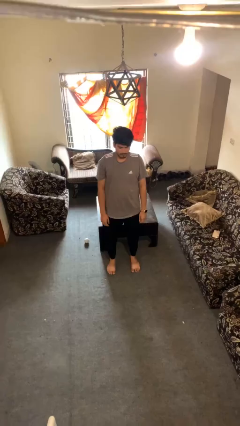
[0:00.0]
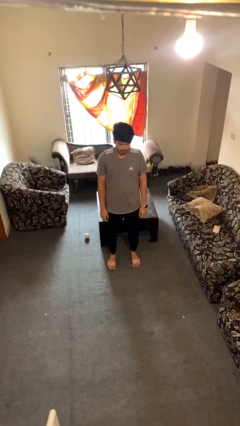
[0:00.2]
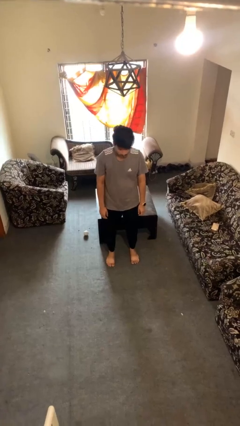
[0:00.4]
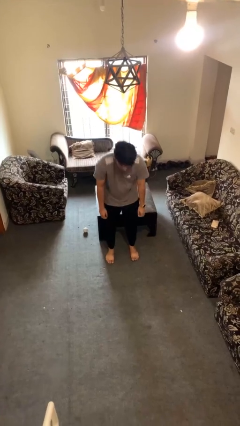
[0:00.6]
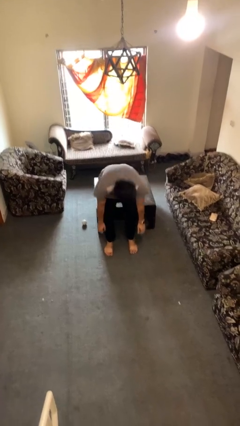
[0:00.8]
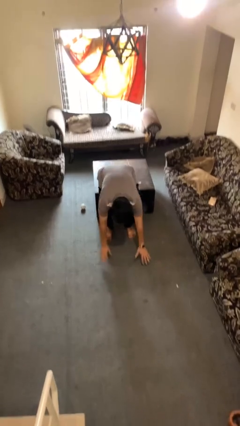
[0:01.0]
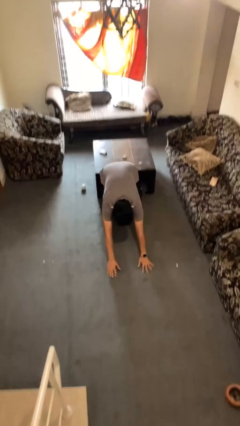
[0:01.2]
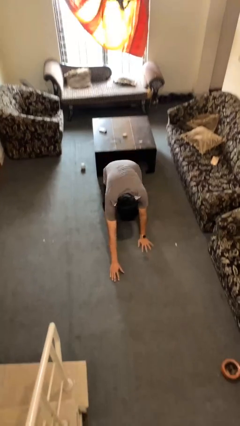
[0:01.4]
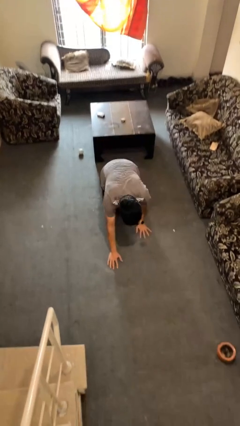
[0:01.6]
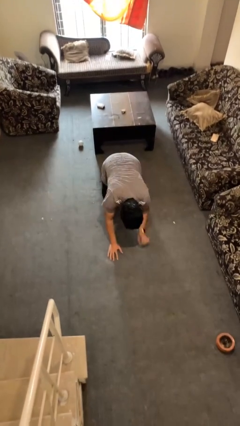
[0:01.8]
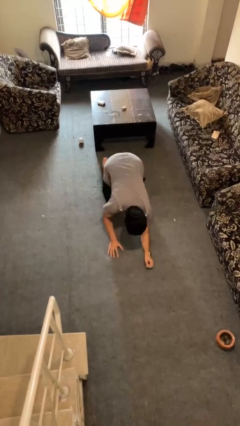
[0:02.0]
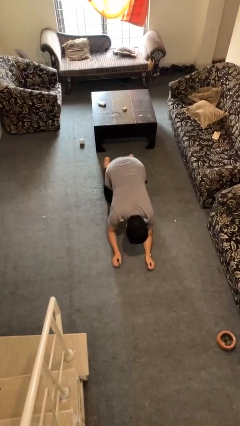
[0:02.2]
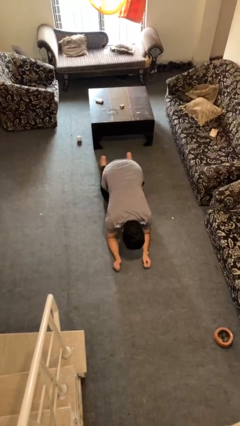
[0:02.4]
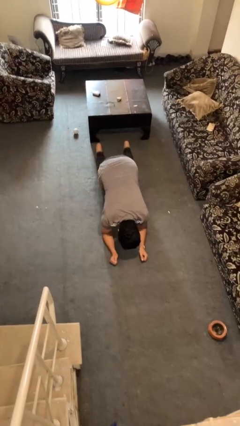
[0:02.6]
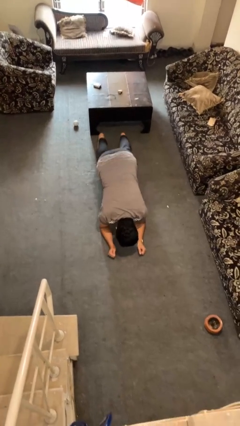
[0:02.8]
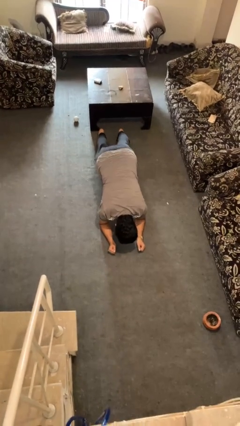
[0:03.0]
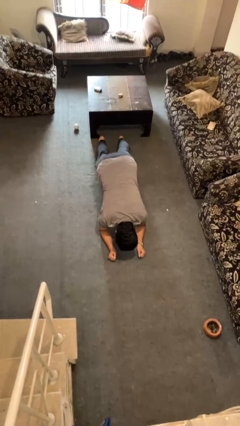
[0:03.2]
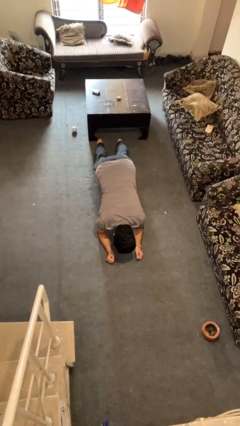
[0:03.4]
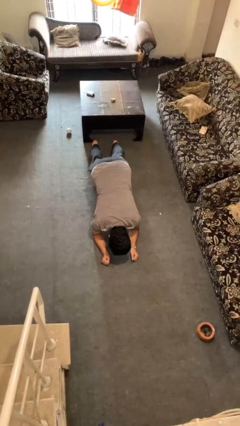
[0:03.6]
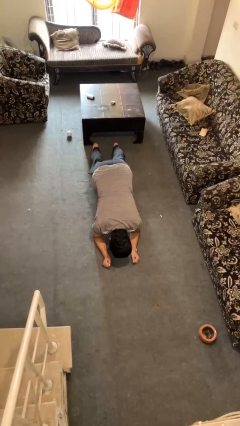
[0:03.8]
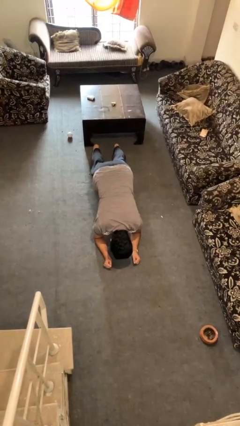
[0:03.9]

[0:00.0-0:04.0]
person exercises with plank

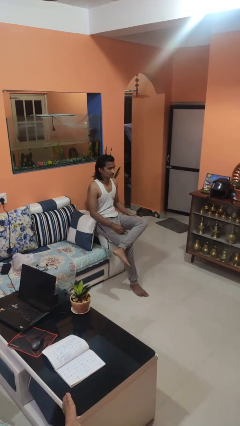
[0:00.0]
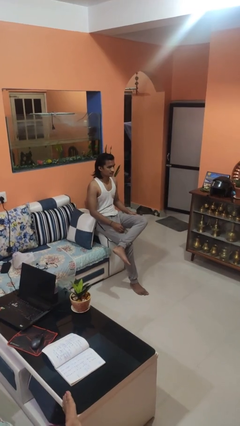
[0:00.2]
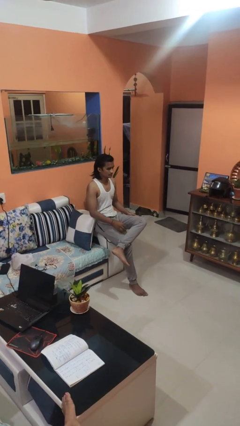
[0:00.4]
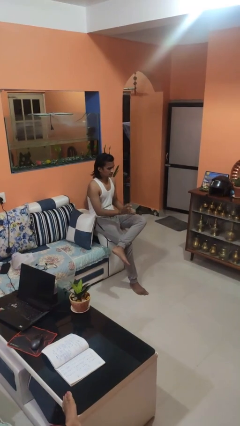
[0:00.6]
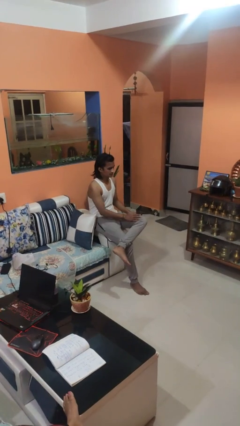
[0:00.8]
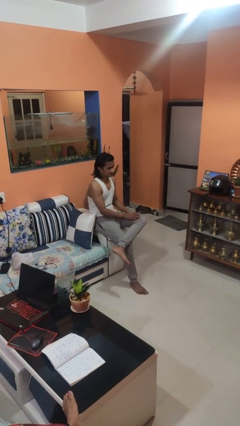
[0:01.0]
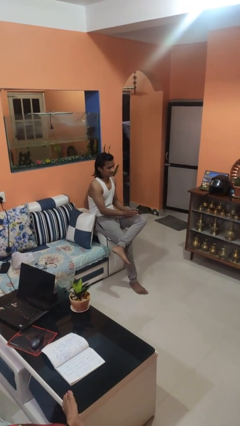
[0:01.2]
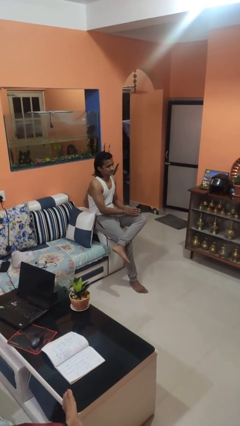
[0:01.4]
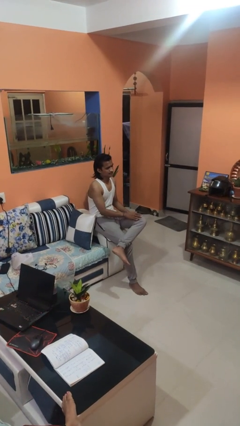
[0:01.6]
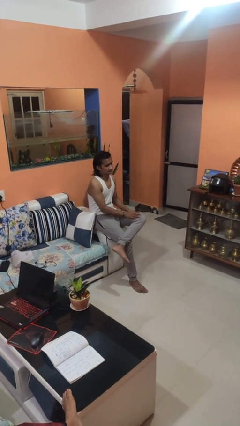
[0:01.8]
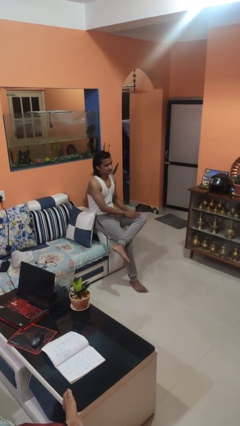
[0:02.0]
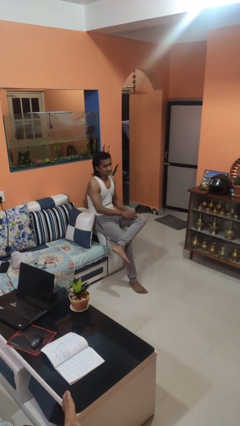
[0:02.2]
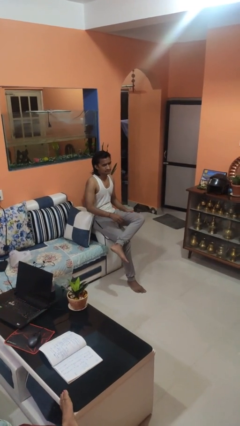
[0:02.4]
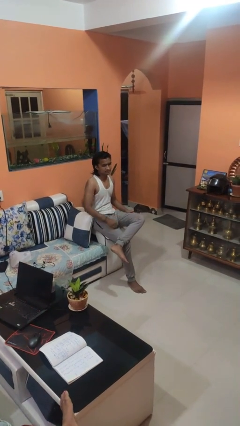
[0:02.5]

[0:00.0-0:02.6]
person slaps hands on thighs

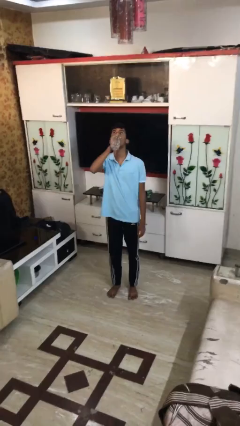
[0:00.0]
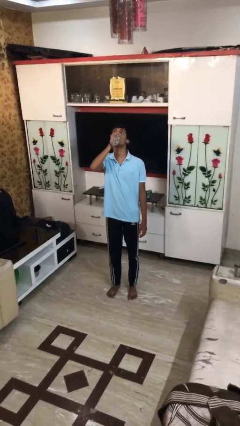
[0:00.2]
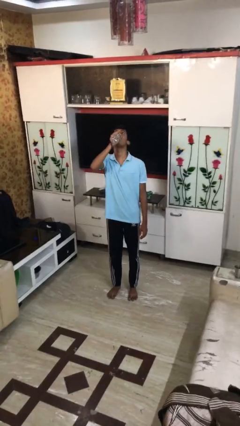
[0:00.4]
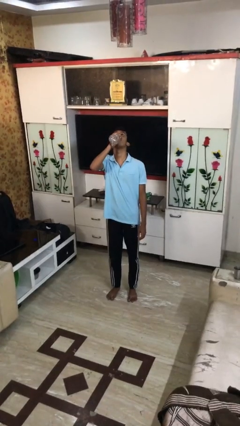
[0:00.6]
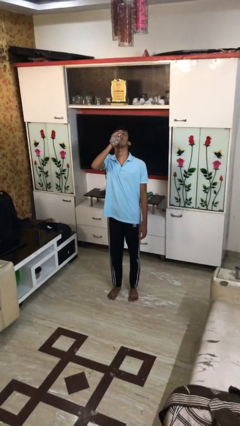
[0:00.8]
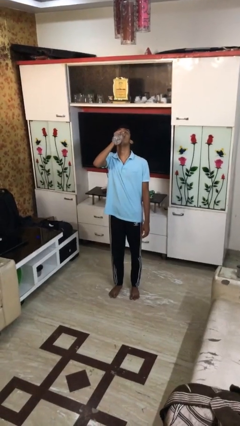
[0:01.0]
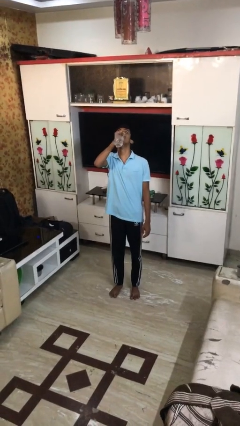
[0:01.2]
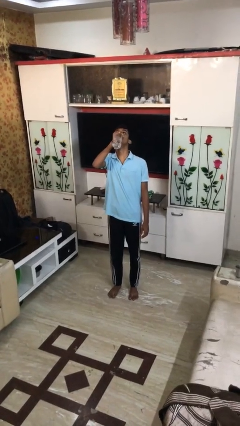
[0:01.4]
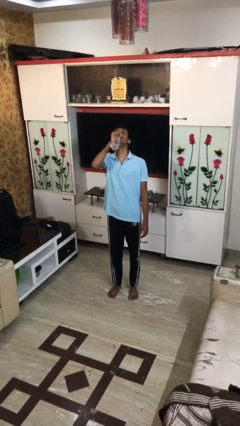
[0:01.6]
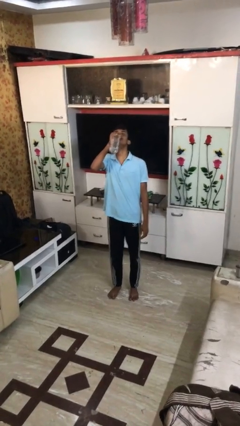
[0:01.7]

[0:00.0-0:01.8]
person drinks from bottle

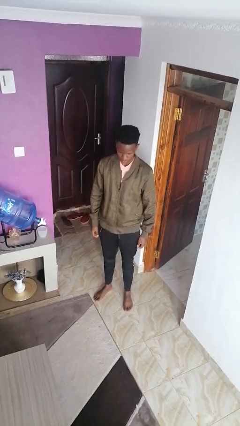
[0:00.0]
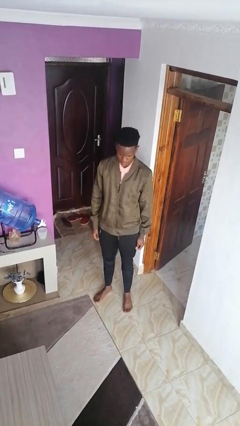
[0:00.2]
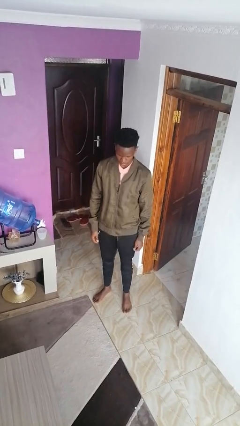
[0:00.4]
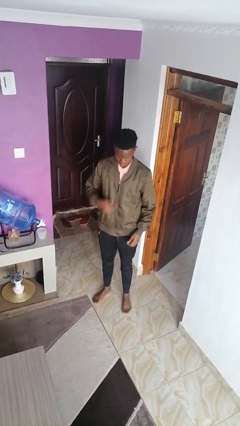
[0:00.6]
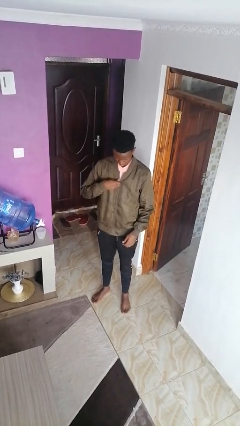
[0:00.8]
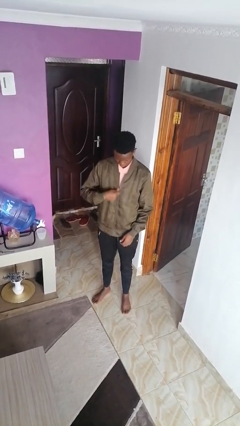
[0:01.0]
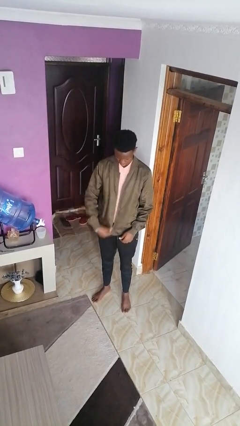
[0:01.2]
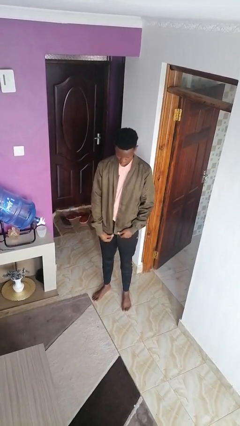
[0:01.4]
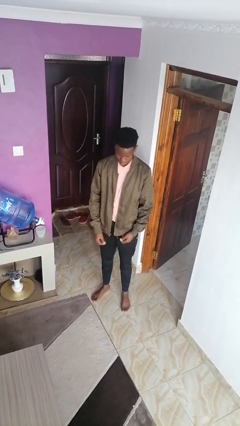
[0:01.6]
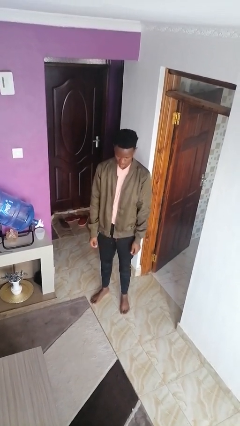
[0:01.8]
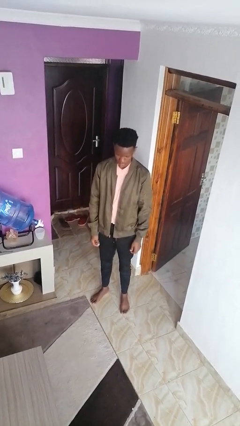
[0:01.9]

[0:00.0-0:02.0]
person unzips jacket

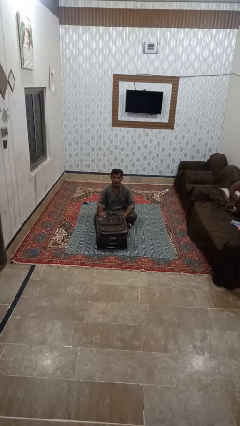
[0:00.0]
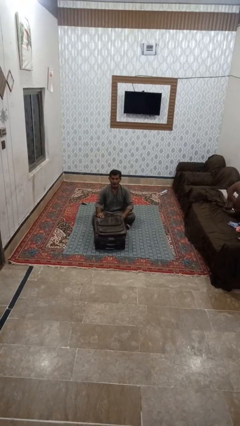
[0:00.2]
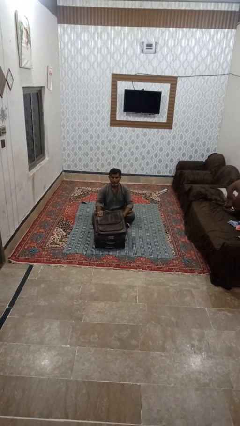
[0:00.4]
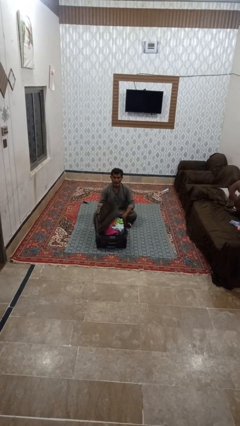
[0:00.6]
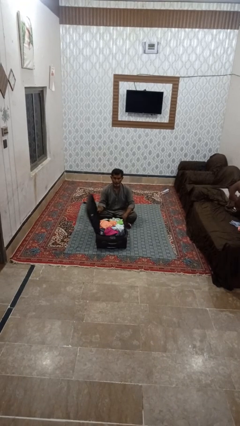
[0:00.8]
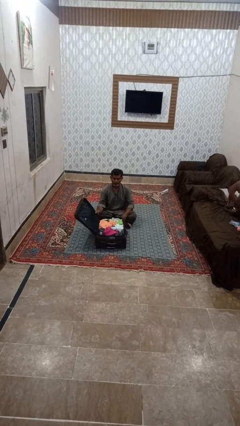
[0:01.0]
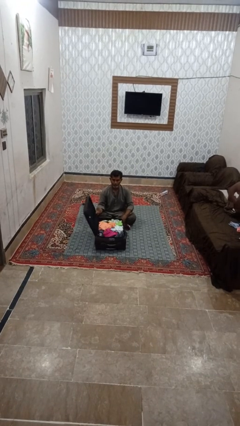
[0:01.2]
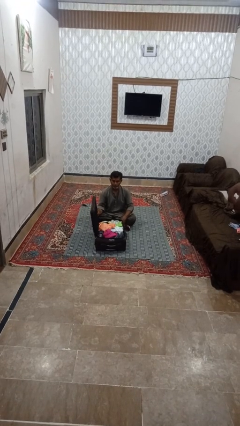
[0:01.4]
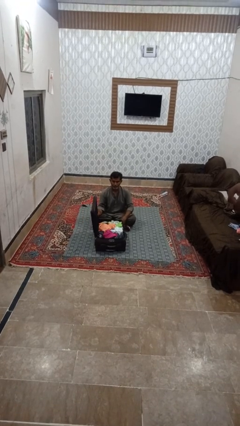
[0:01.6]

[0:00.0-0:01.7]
person opens clothes washer

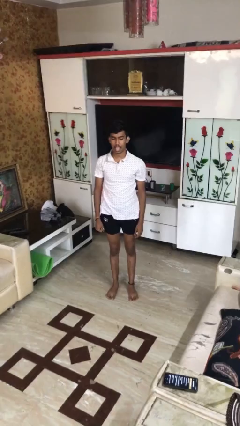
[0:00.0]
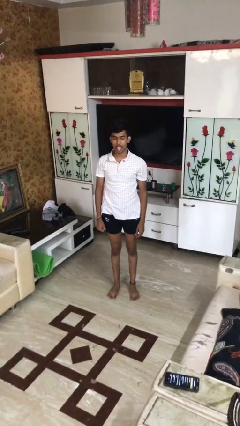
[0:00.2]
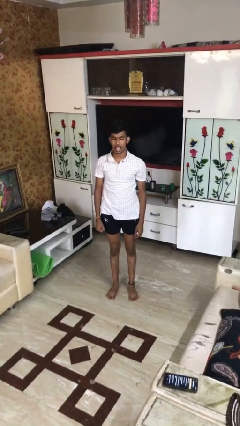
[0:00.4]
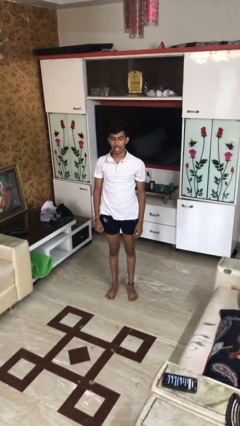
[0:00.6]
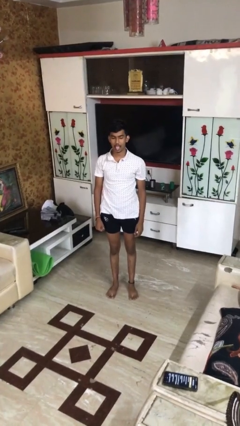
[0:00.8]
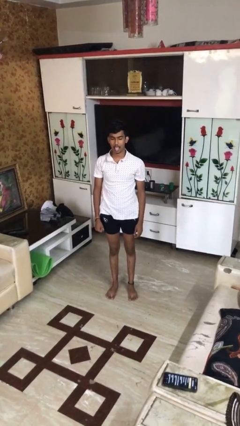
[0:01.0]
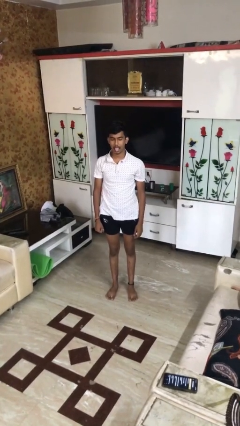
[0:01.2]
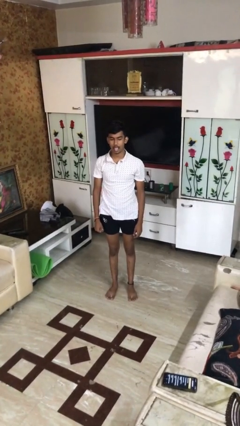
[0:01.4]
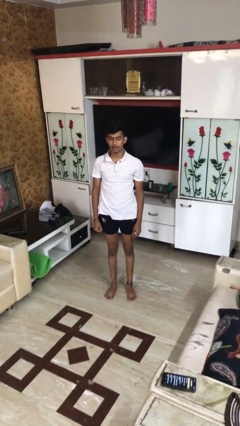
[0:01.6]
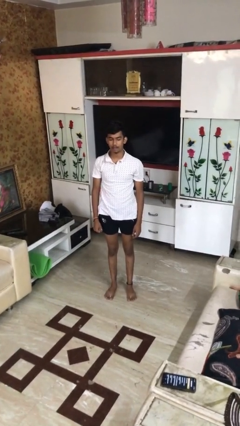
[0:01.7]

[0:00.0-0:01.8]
person sticks out tongue

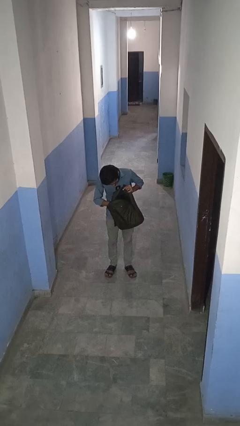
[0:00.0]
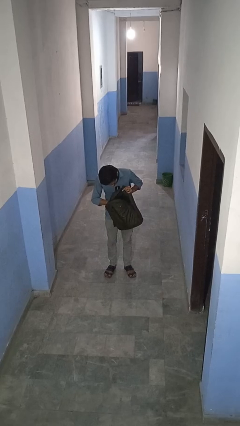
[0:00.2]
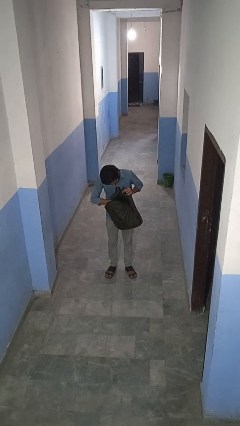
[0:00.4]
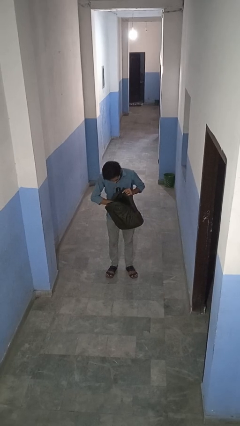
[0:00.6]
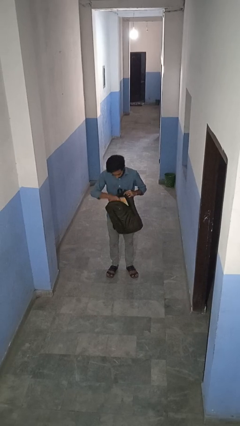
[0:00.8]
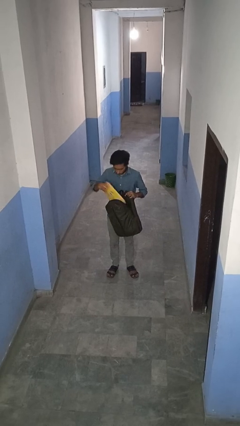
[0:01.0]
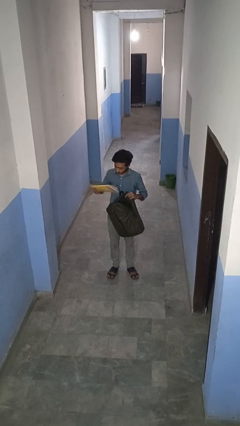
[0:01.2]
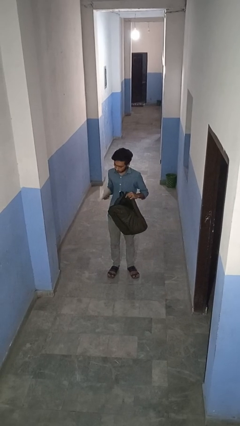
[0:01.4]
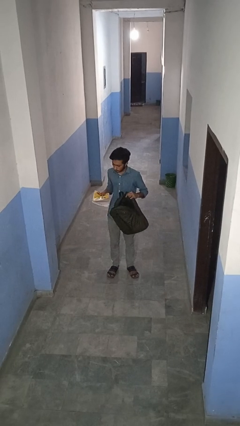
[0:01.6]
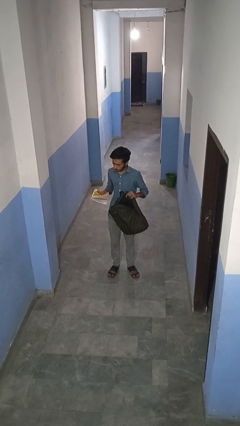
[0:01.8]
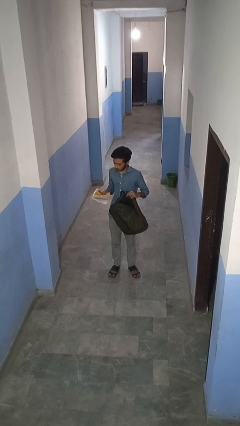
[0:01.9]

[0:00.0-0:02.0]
person takes object from backpack

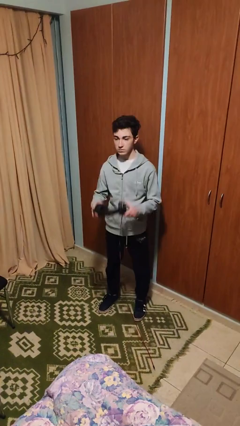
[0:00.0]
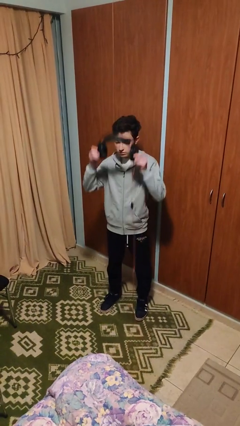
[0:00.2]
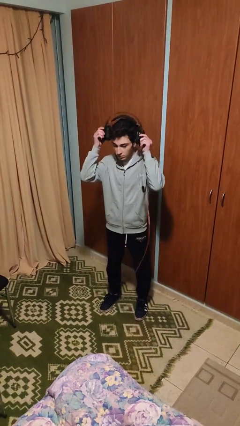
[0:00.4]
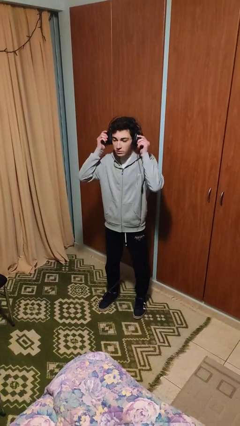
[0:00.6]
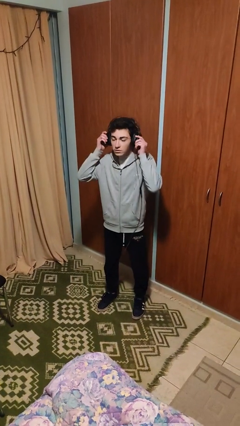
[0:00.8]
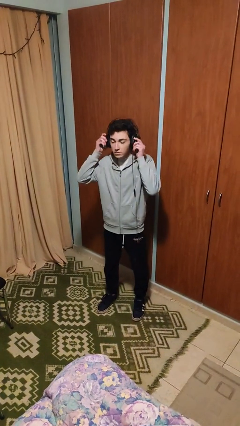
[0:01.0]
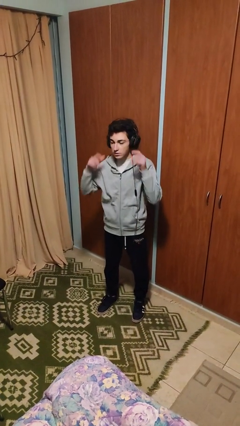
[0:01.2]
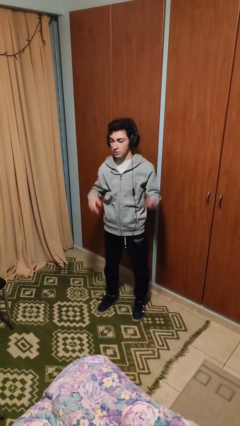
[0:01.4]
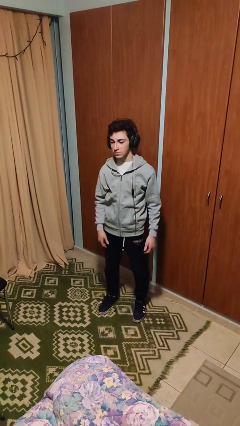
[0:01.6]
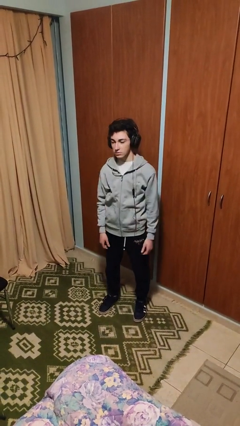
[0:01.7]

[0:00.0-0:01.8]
person puts on headphones
